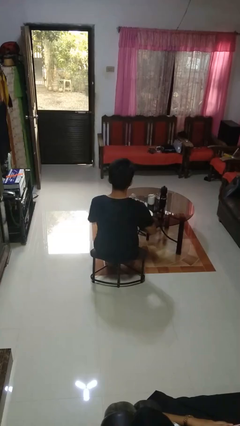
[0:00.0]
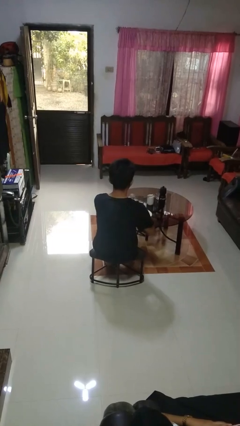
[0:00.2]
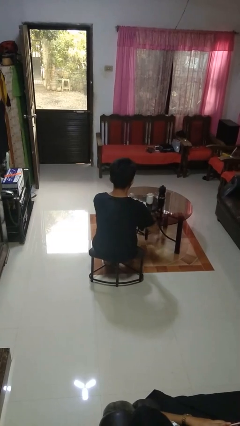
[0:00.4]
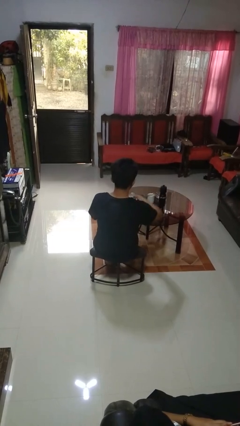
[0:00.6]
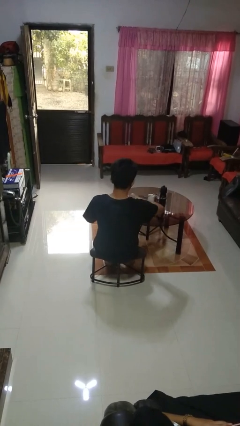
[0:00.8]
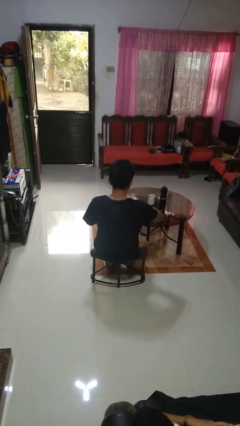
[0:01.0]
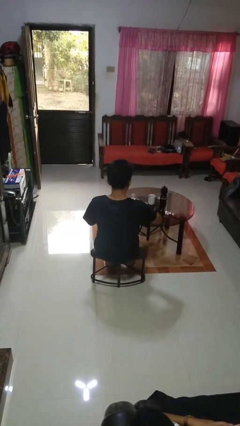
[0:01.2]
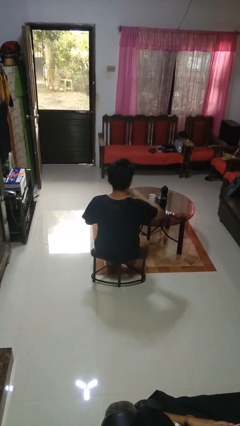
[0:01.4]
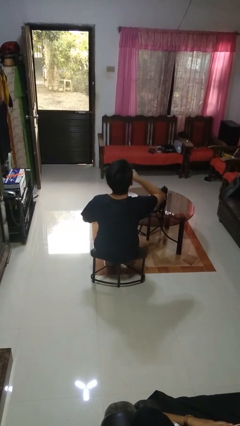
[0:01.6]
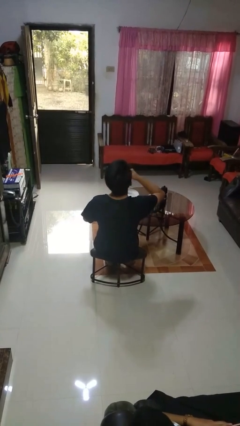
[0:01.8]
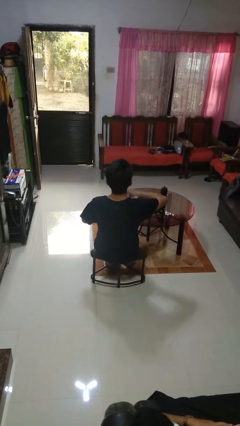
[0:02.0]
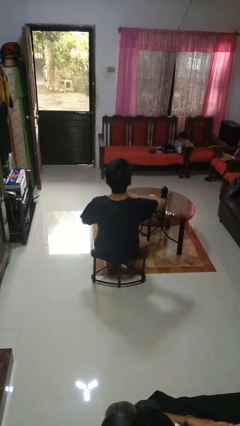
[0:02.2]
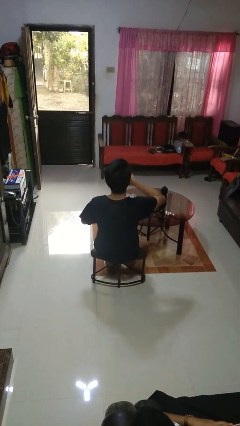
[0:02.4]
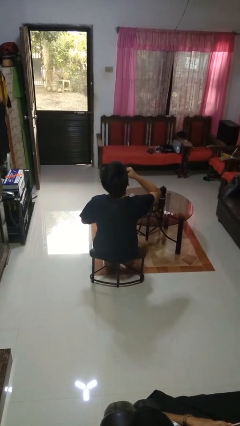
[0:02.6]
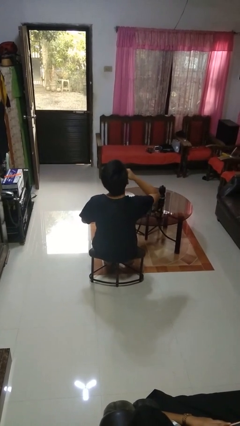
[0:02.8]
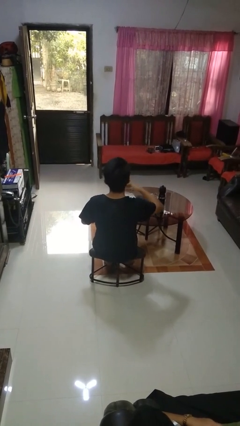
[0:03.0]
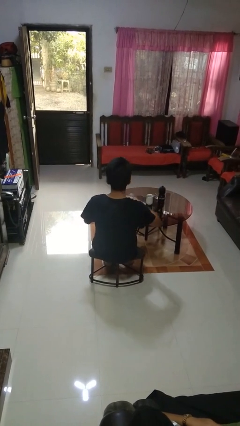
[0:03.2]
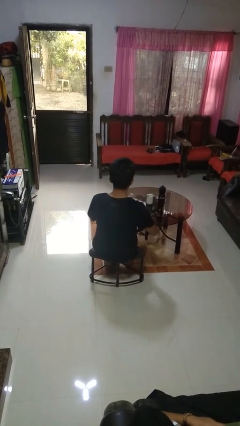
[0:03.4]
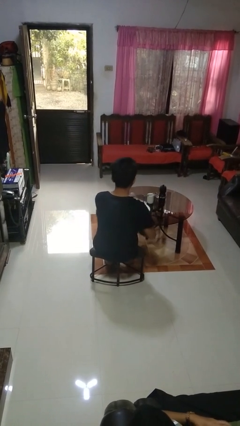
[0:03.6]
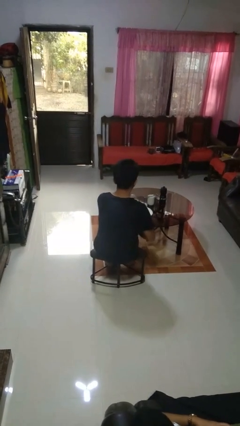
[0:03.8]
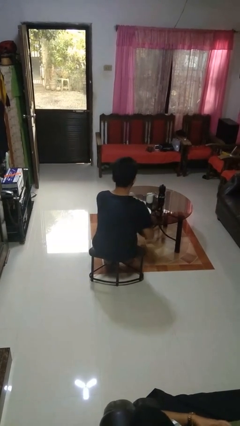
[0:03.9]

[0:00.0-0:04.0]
person eats with hands

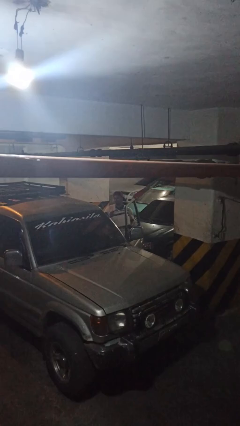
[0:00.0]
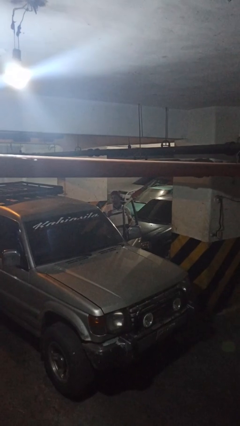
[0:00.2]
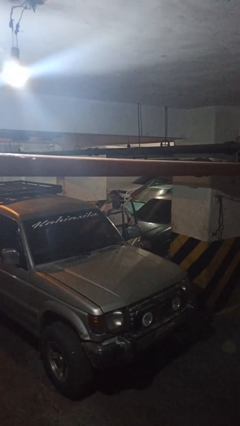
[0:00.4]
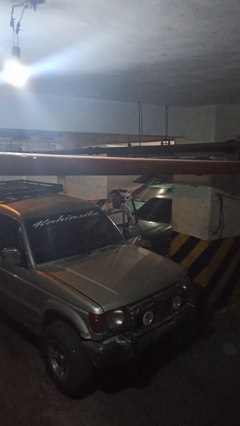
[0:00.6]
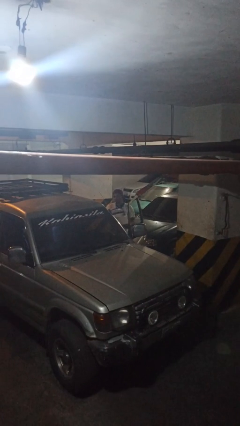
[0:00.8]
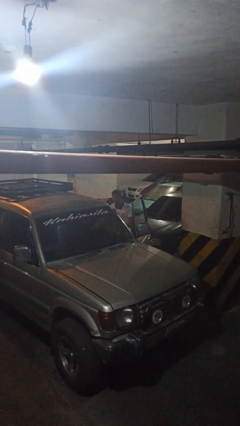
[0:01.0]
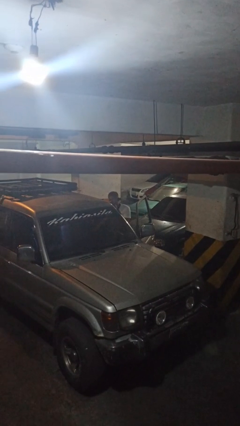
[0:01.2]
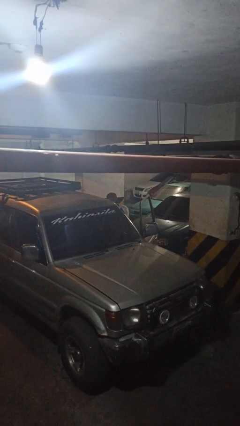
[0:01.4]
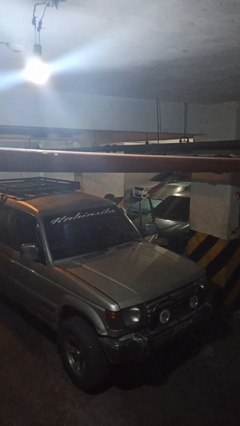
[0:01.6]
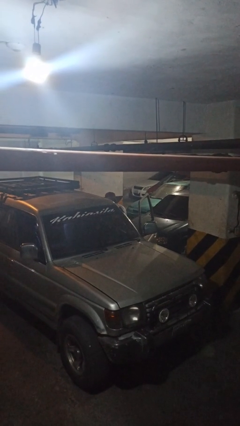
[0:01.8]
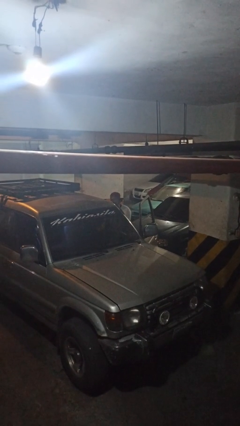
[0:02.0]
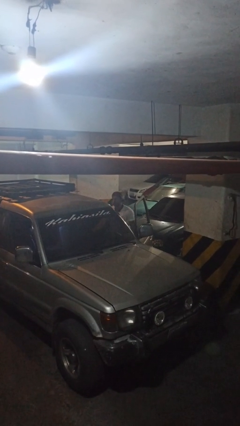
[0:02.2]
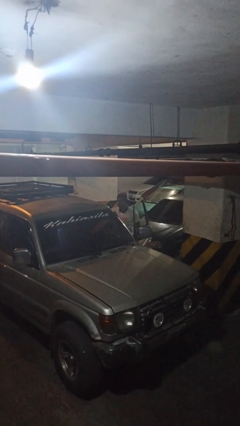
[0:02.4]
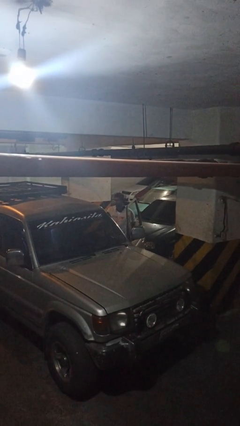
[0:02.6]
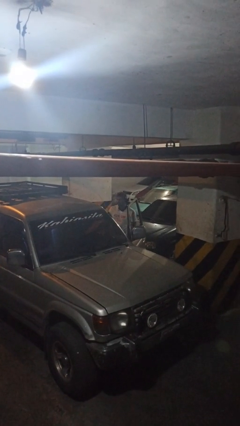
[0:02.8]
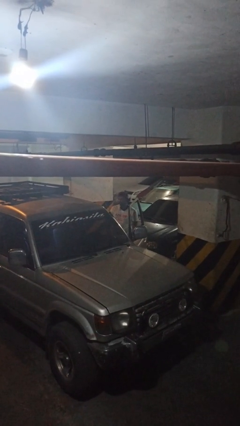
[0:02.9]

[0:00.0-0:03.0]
person loads car

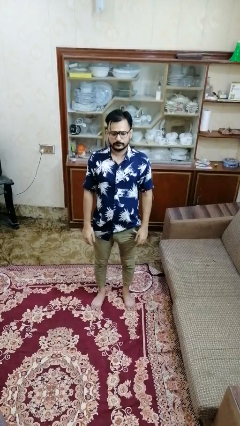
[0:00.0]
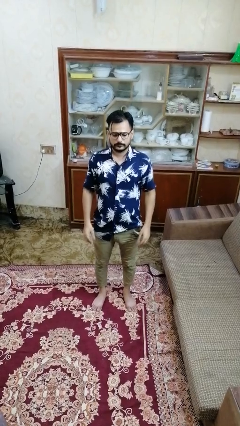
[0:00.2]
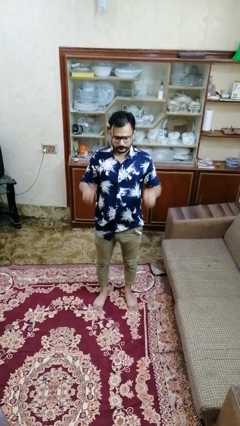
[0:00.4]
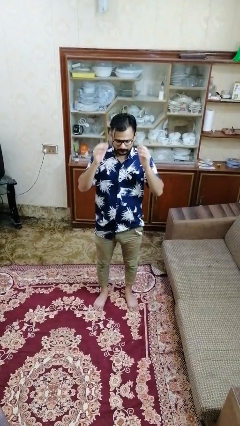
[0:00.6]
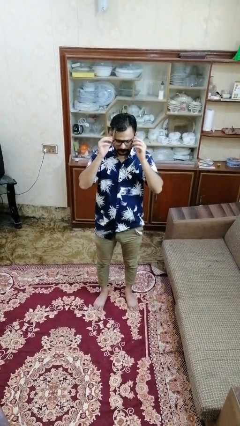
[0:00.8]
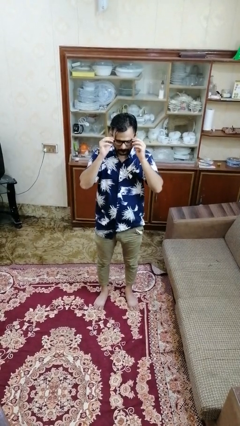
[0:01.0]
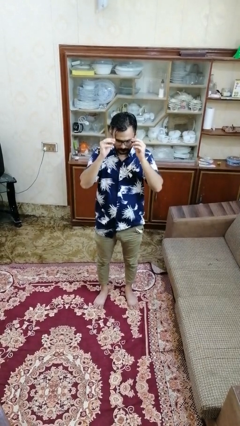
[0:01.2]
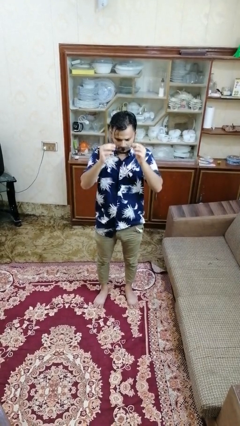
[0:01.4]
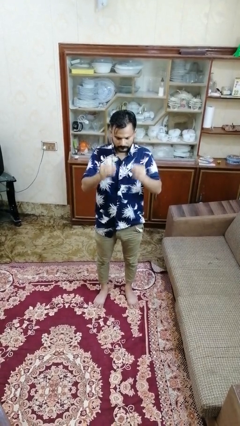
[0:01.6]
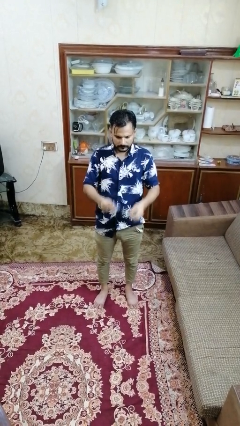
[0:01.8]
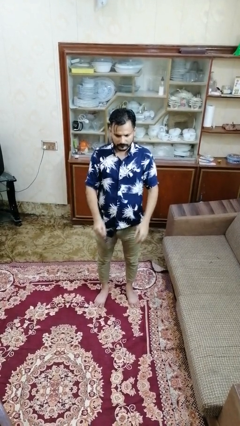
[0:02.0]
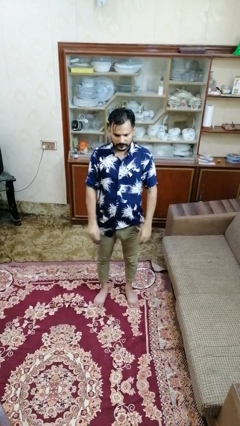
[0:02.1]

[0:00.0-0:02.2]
person takes off glasses

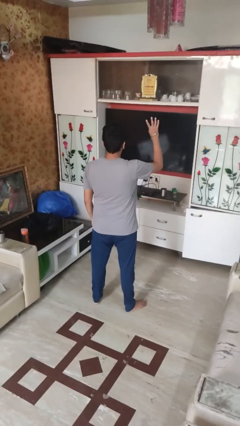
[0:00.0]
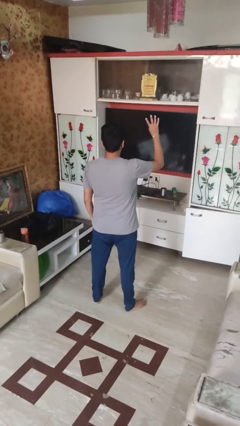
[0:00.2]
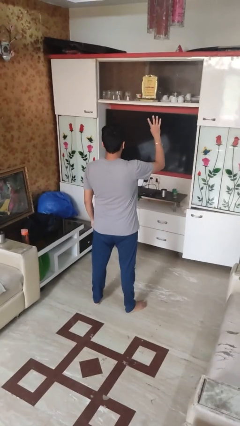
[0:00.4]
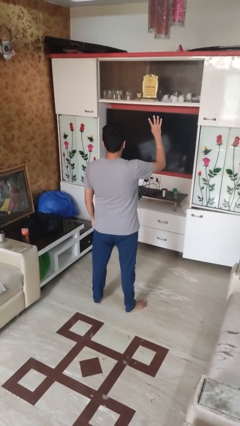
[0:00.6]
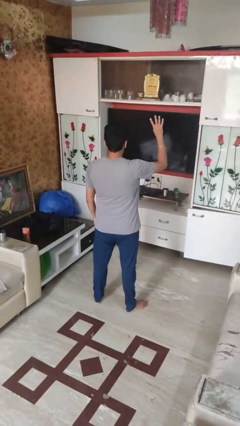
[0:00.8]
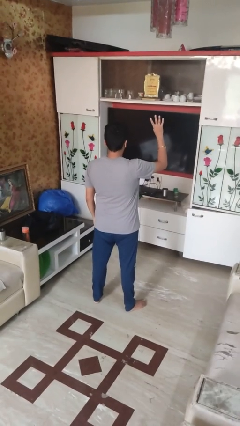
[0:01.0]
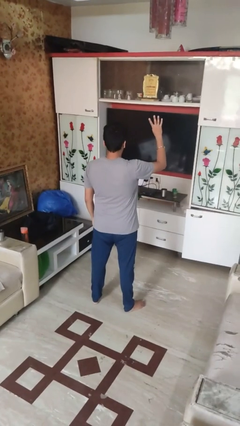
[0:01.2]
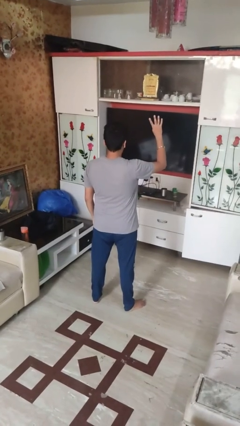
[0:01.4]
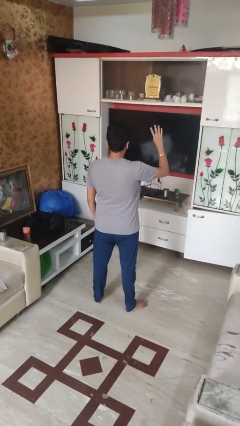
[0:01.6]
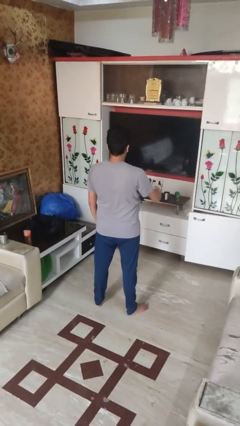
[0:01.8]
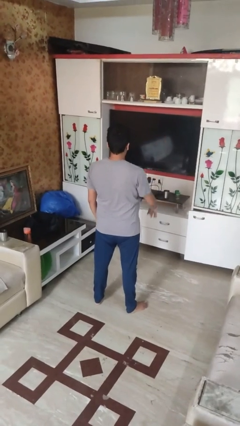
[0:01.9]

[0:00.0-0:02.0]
person gestures number four

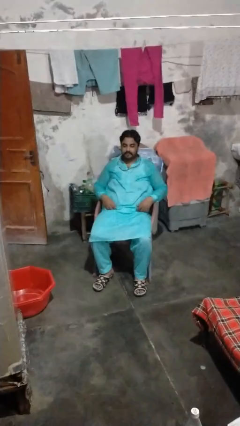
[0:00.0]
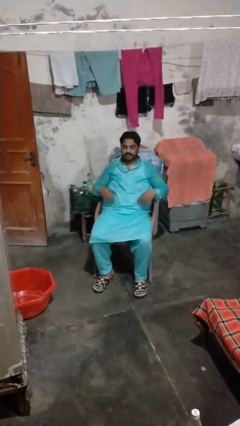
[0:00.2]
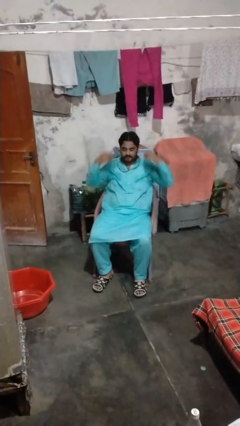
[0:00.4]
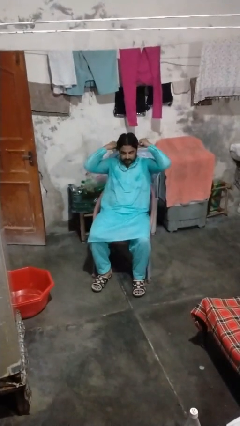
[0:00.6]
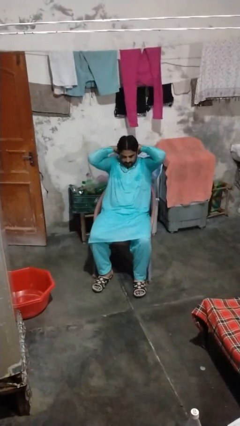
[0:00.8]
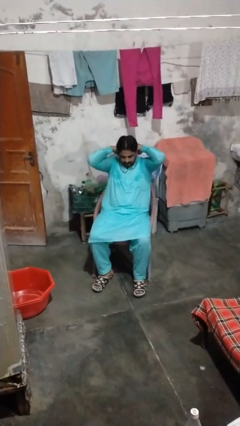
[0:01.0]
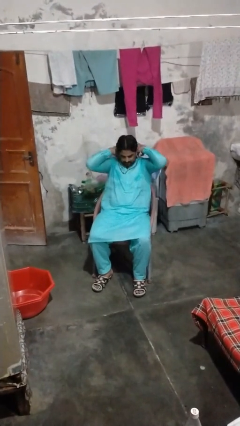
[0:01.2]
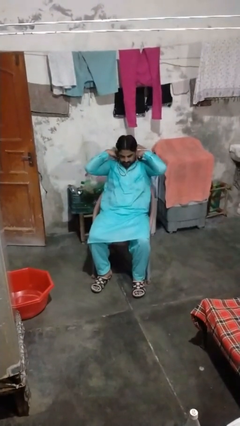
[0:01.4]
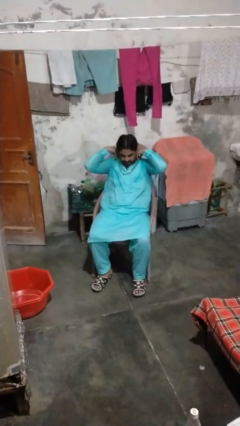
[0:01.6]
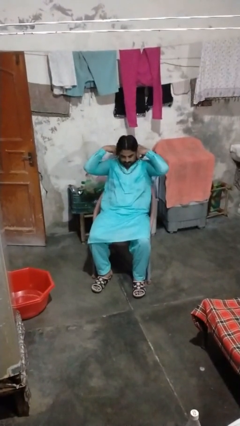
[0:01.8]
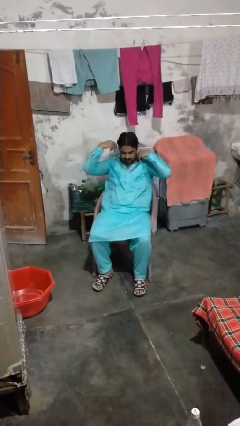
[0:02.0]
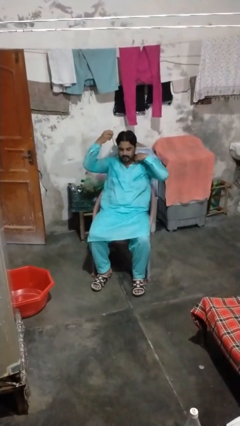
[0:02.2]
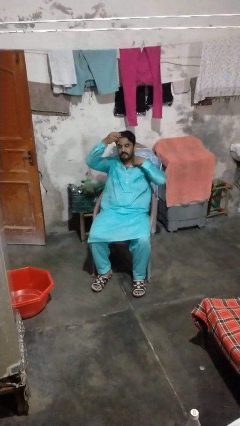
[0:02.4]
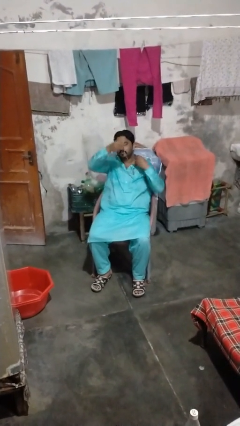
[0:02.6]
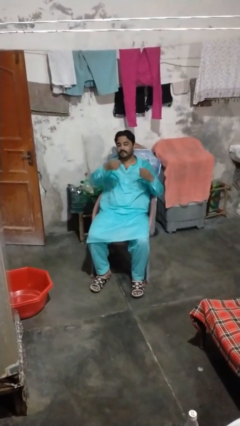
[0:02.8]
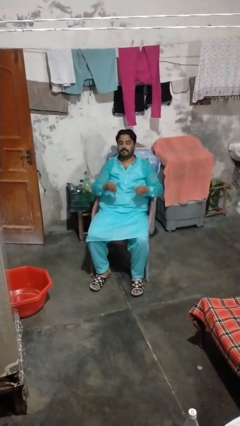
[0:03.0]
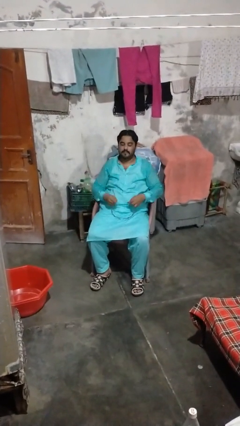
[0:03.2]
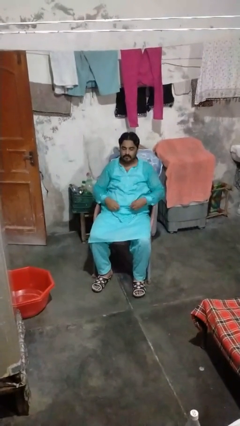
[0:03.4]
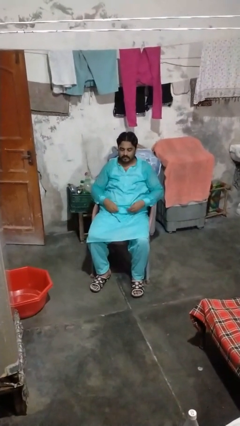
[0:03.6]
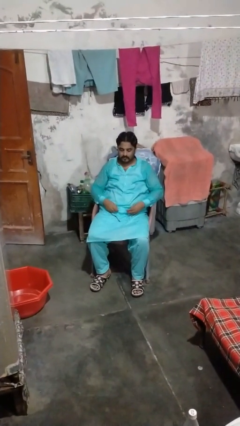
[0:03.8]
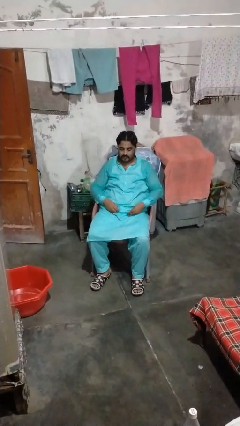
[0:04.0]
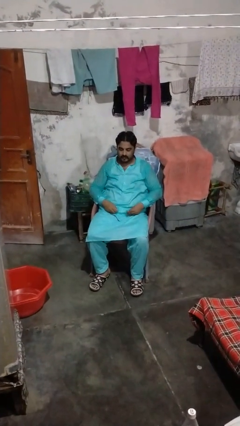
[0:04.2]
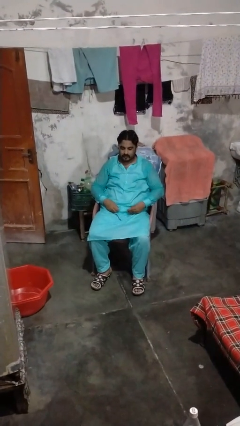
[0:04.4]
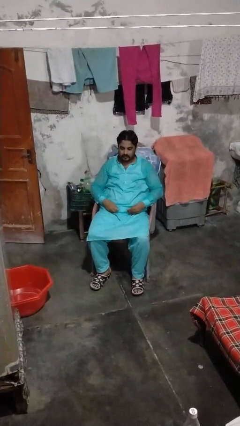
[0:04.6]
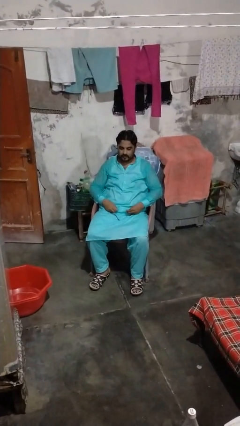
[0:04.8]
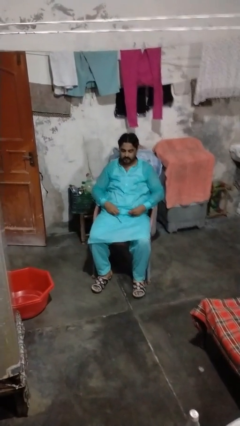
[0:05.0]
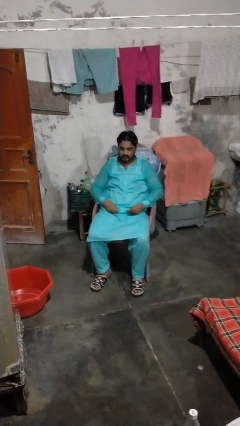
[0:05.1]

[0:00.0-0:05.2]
person takes off necklace

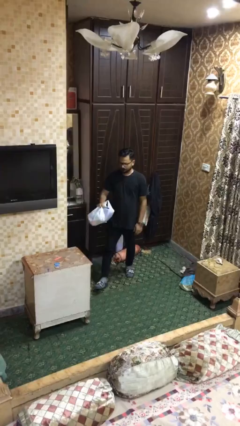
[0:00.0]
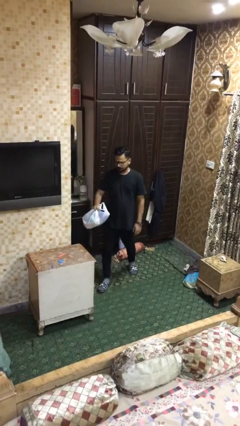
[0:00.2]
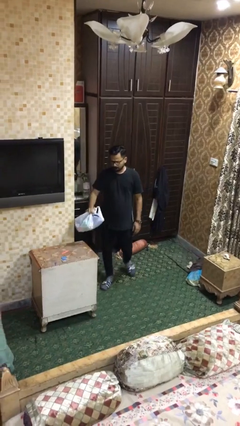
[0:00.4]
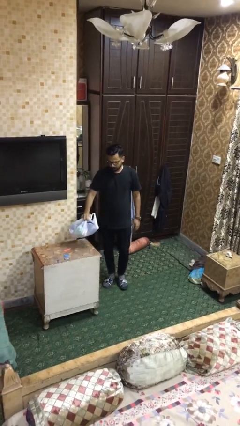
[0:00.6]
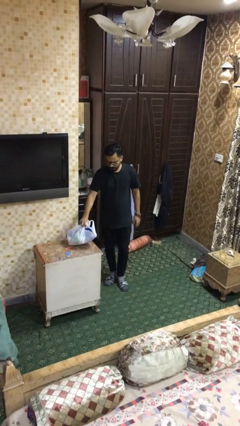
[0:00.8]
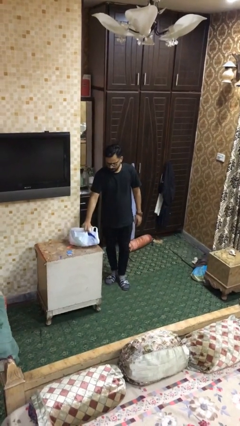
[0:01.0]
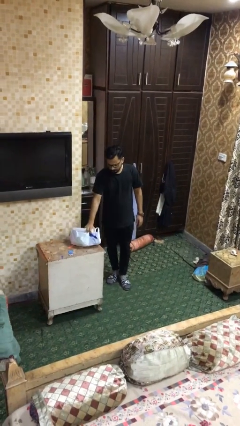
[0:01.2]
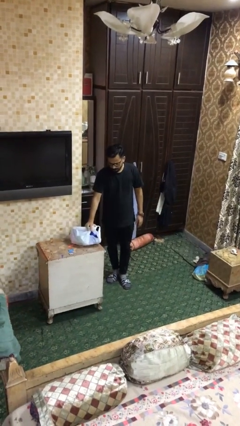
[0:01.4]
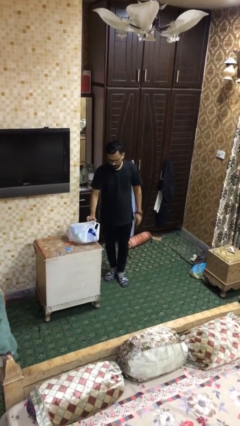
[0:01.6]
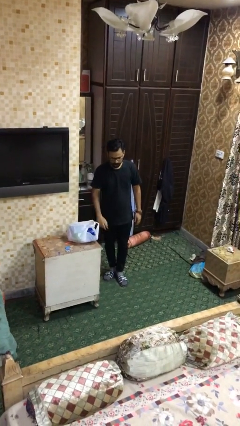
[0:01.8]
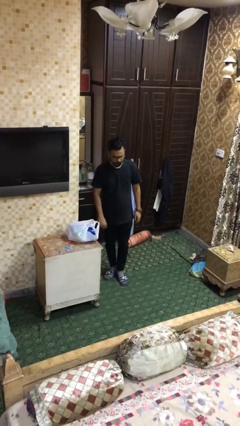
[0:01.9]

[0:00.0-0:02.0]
person puts down object on table
